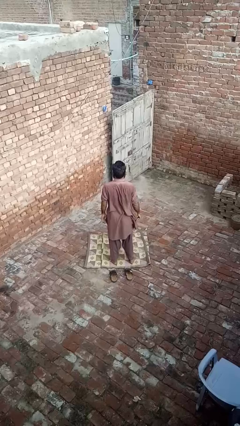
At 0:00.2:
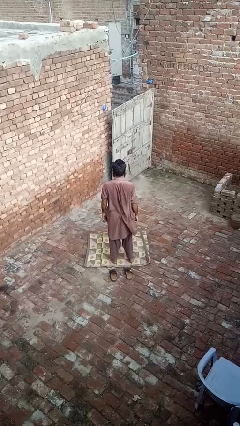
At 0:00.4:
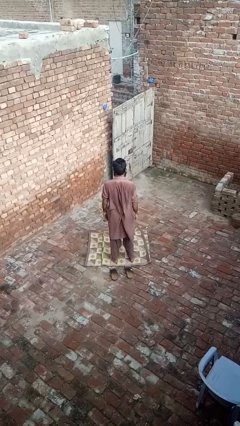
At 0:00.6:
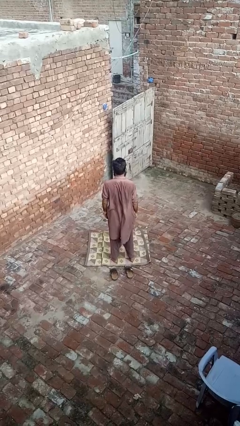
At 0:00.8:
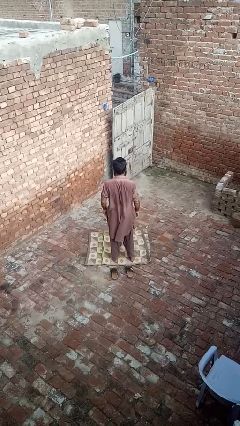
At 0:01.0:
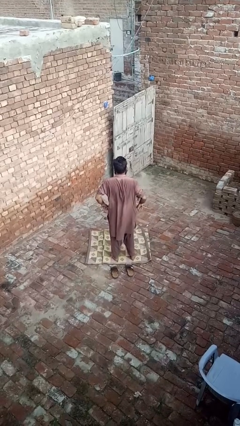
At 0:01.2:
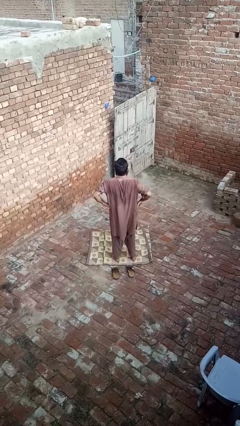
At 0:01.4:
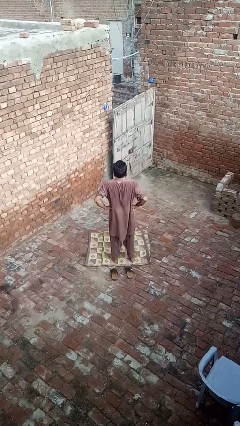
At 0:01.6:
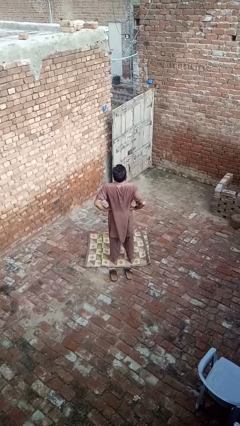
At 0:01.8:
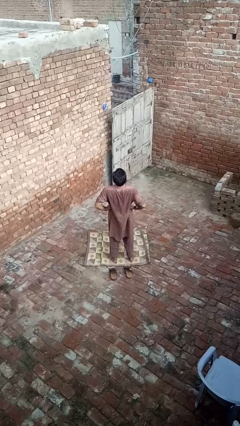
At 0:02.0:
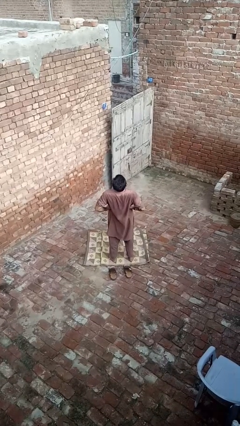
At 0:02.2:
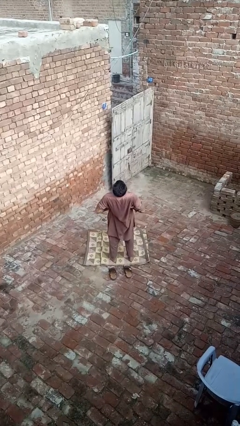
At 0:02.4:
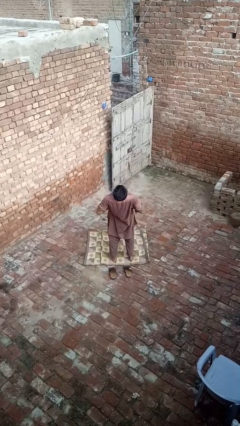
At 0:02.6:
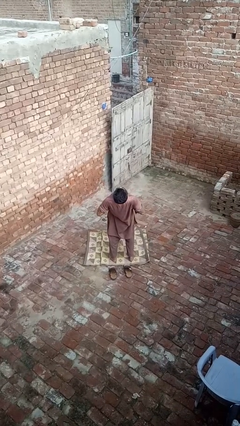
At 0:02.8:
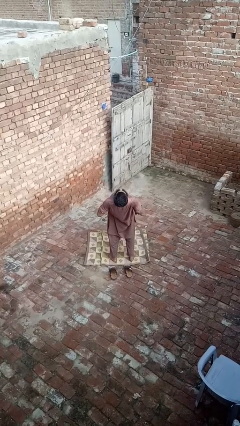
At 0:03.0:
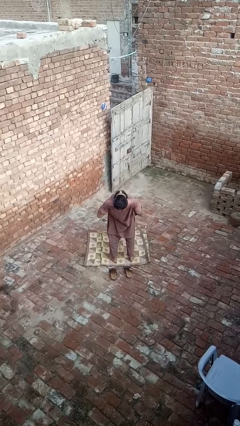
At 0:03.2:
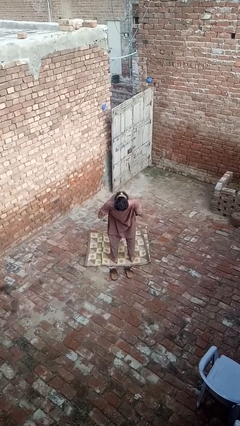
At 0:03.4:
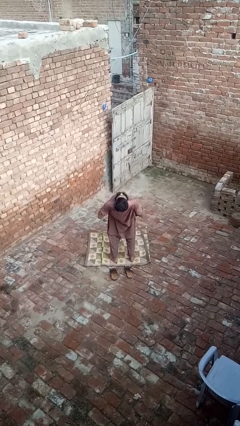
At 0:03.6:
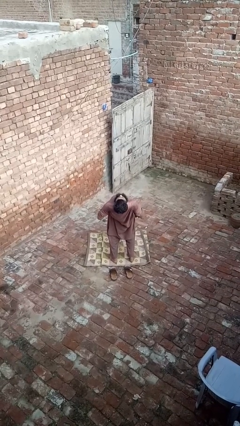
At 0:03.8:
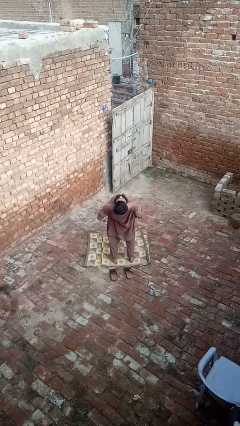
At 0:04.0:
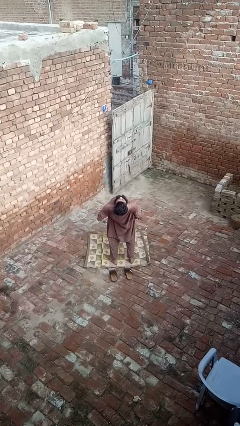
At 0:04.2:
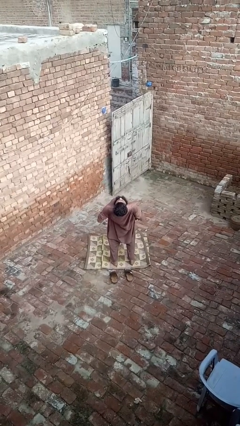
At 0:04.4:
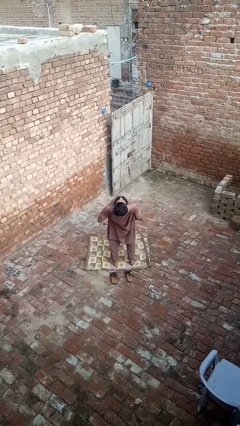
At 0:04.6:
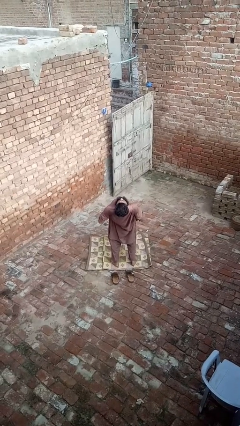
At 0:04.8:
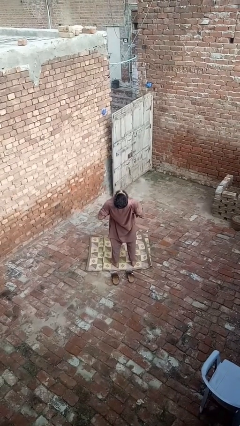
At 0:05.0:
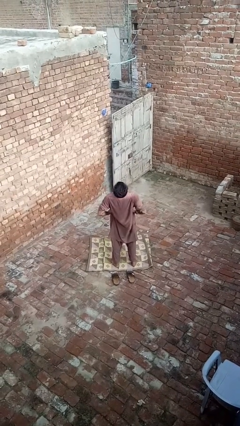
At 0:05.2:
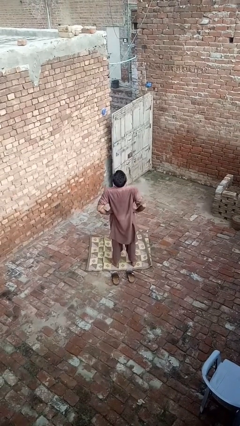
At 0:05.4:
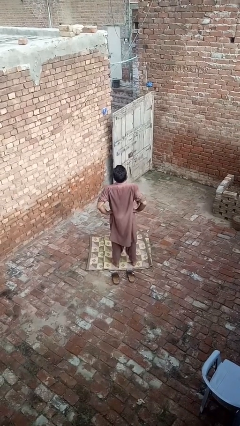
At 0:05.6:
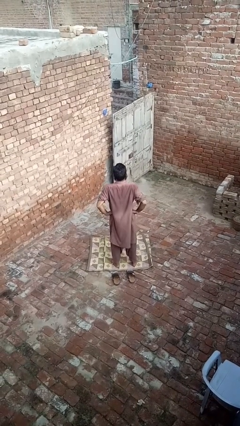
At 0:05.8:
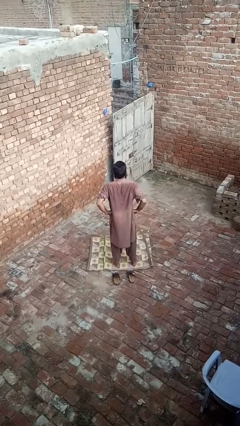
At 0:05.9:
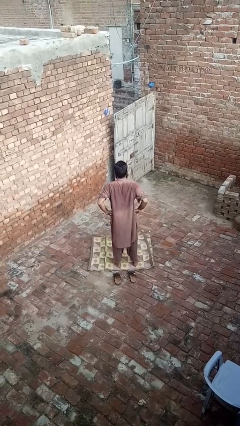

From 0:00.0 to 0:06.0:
person stretches back

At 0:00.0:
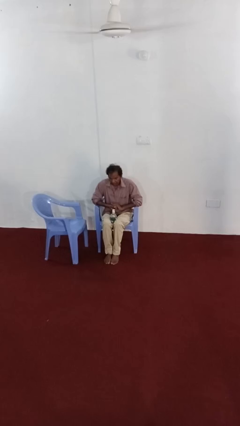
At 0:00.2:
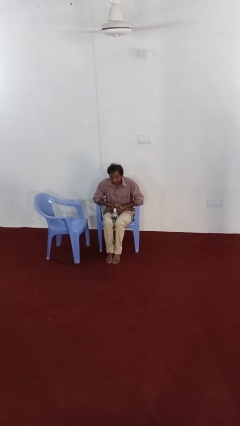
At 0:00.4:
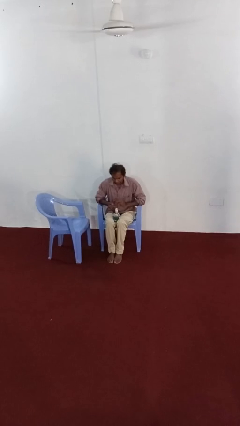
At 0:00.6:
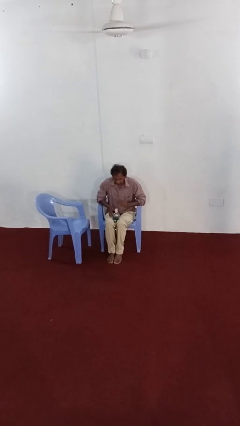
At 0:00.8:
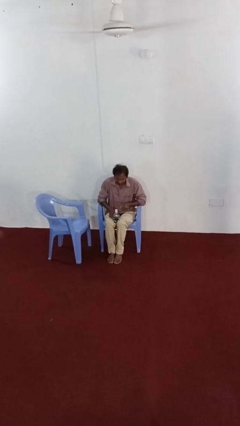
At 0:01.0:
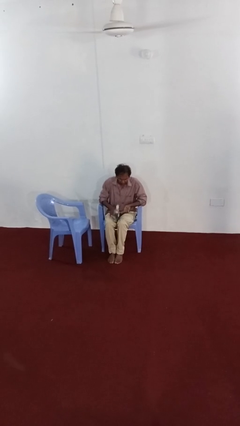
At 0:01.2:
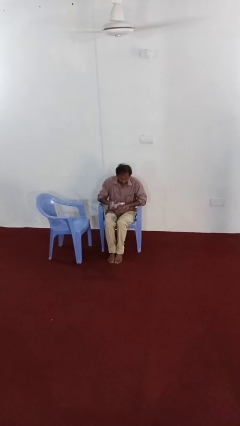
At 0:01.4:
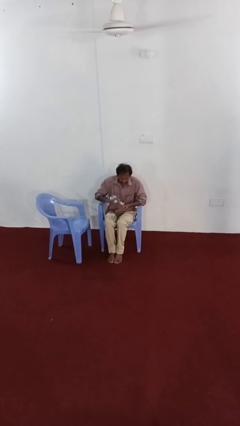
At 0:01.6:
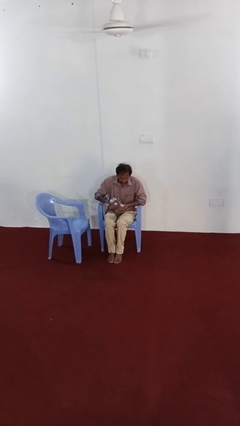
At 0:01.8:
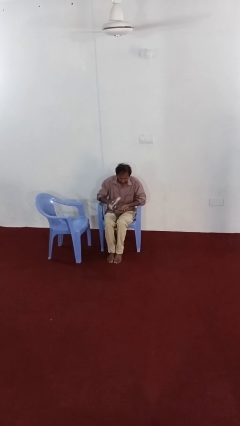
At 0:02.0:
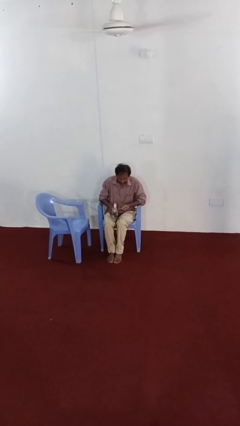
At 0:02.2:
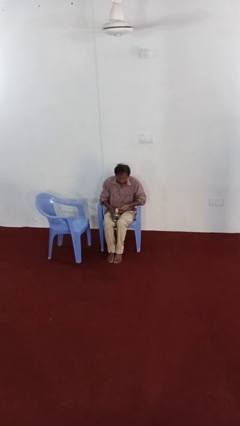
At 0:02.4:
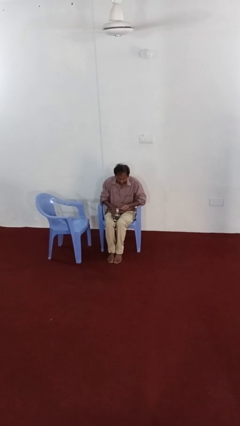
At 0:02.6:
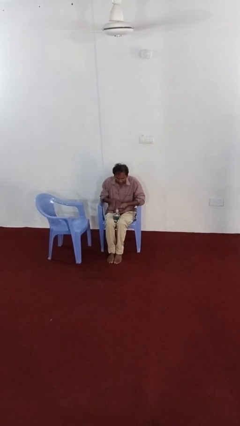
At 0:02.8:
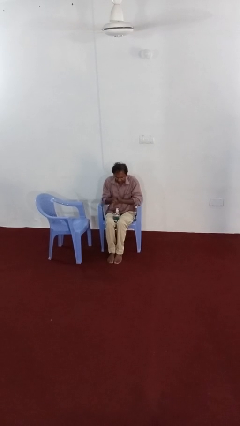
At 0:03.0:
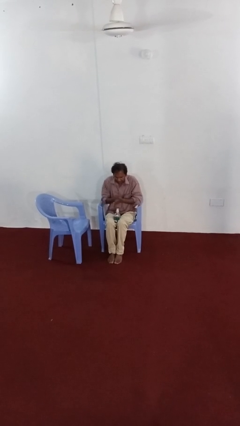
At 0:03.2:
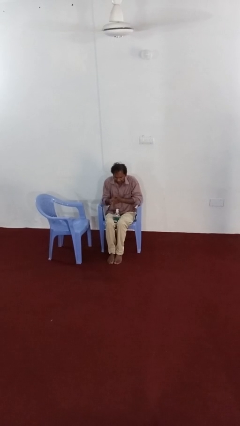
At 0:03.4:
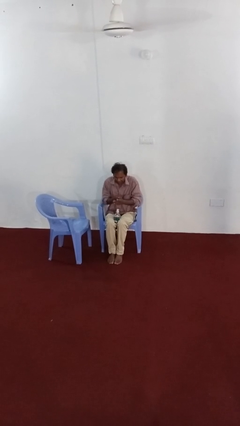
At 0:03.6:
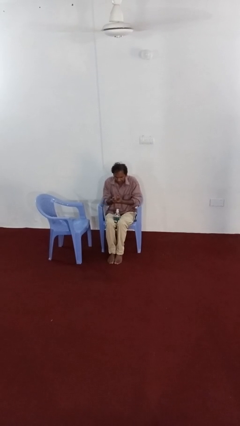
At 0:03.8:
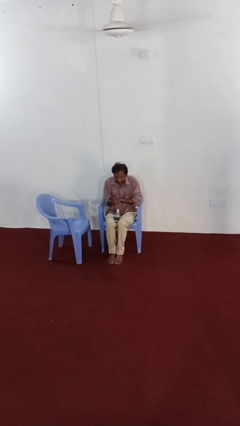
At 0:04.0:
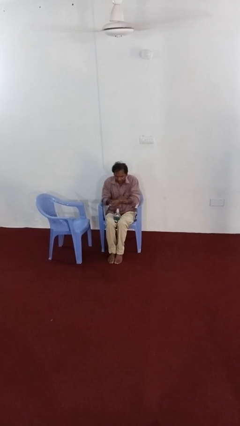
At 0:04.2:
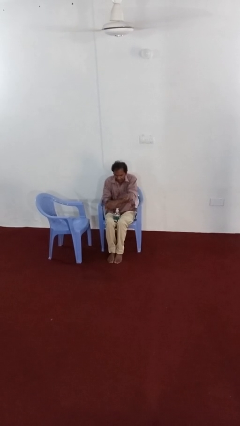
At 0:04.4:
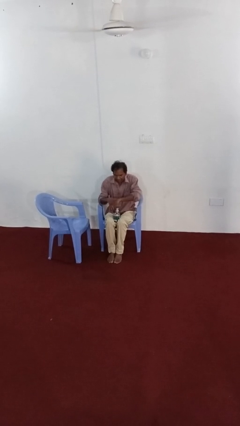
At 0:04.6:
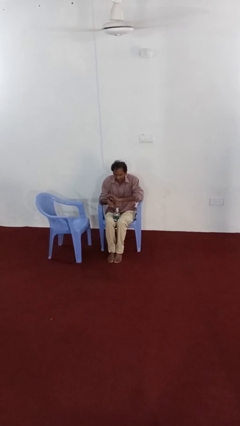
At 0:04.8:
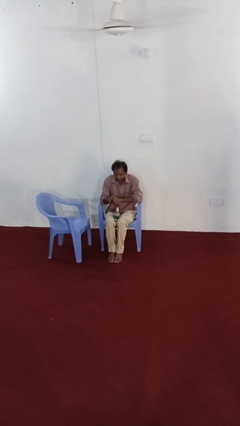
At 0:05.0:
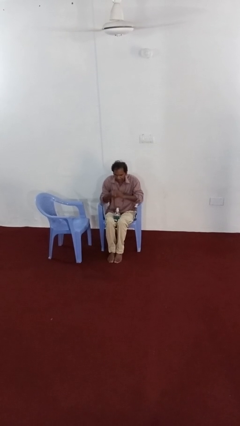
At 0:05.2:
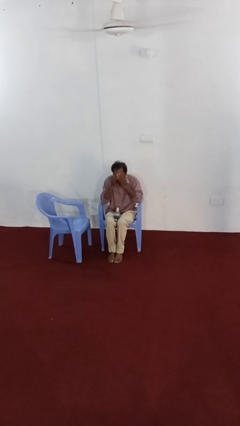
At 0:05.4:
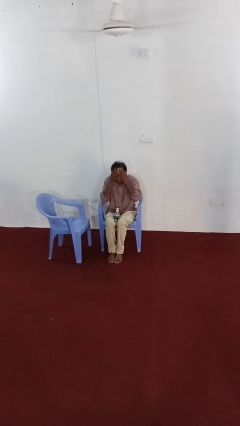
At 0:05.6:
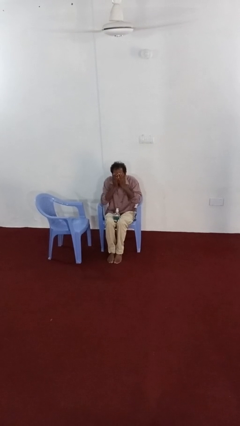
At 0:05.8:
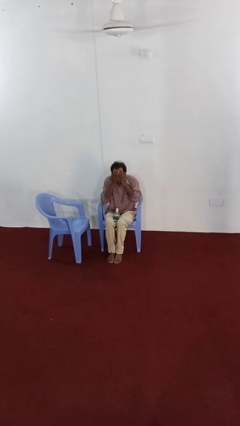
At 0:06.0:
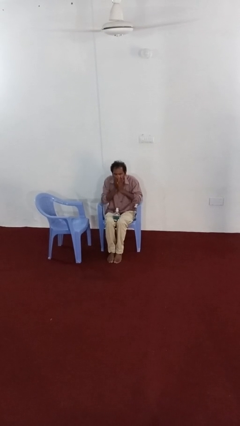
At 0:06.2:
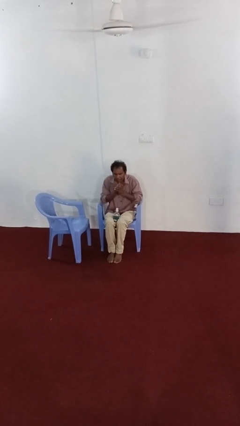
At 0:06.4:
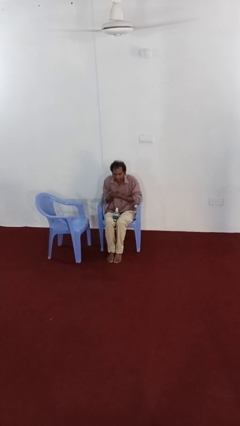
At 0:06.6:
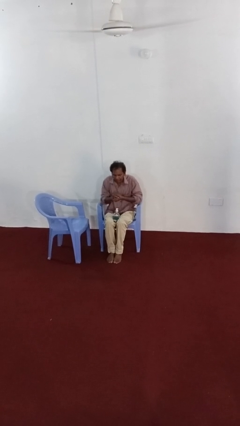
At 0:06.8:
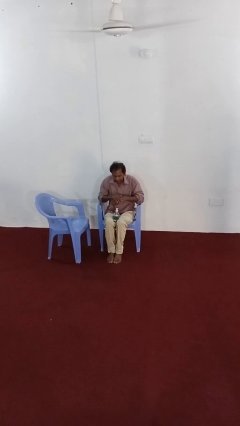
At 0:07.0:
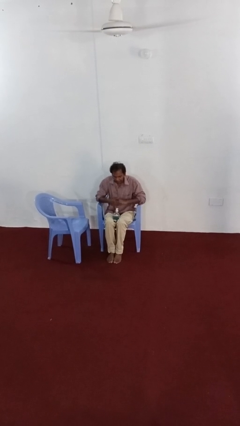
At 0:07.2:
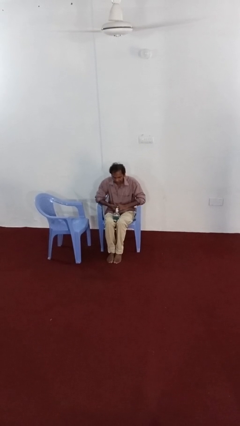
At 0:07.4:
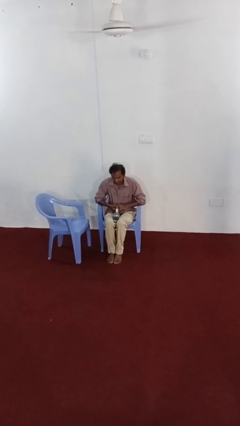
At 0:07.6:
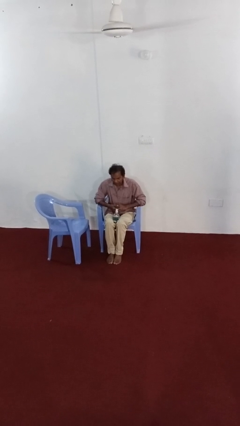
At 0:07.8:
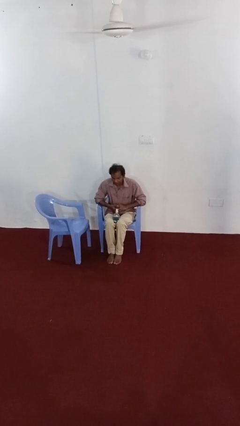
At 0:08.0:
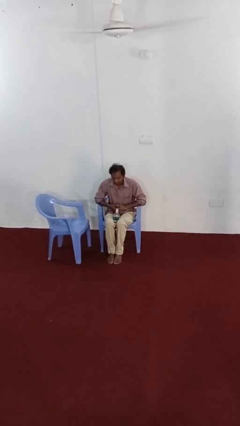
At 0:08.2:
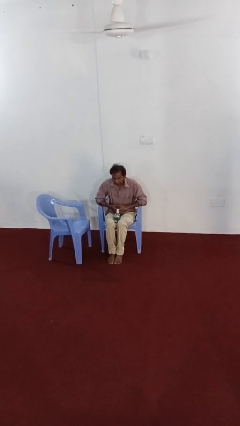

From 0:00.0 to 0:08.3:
person applies sunscreen

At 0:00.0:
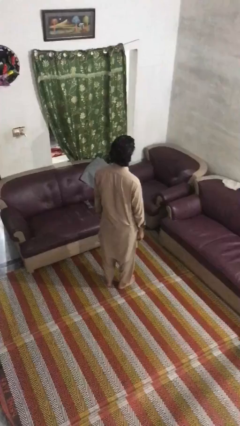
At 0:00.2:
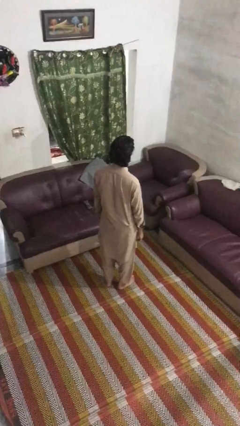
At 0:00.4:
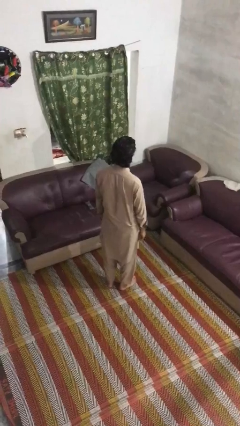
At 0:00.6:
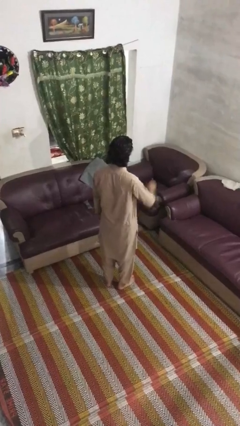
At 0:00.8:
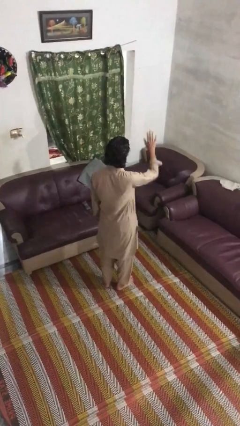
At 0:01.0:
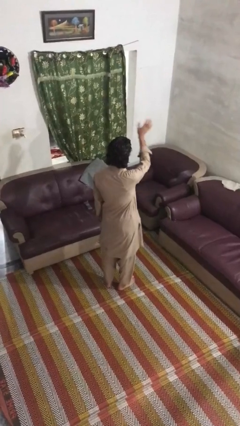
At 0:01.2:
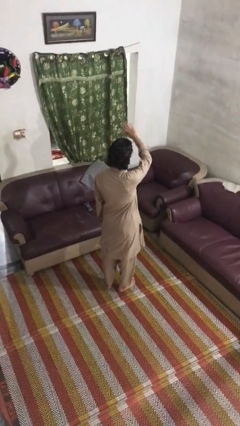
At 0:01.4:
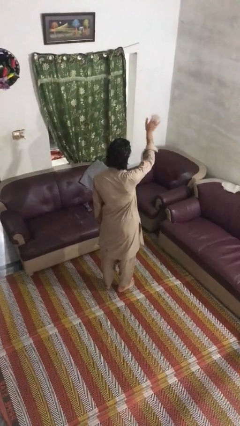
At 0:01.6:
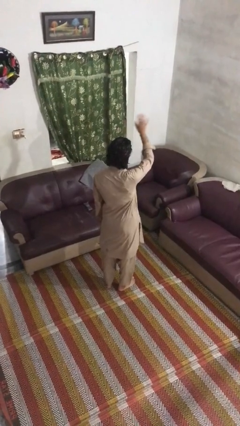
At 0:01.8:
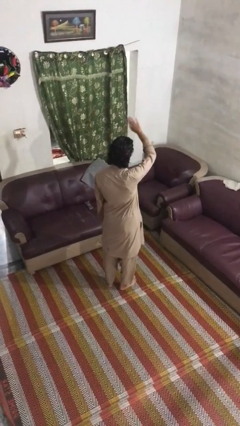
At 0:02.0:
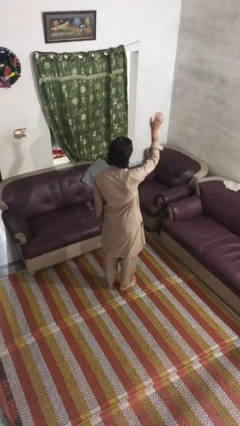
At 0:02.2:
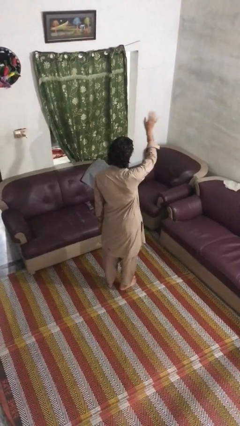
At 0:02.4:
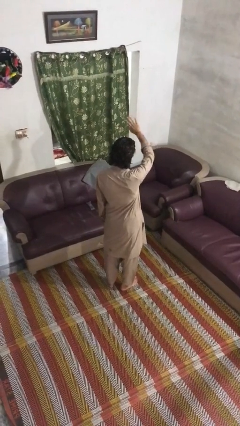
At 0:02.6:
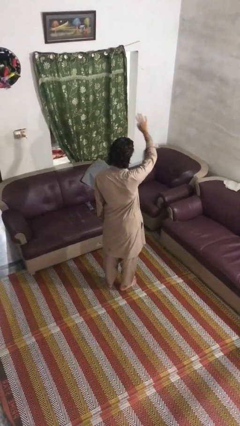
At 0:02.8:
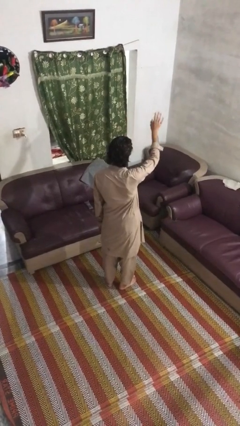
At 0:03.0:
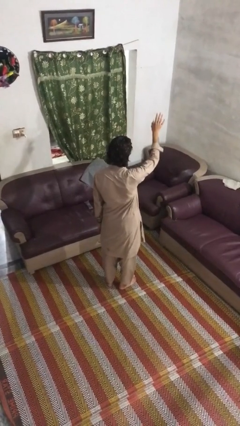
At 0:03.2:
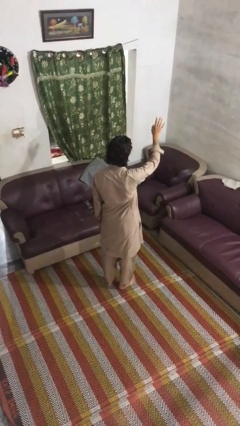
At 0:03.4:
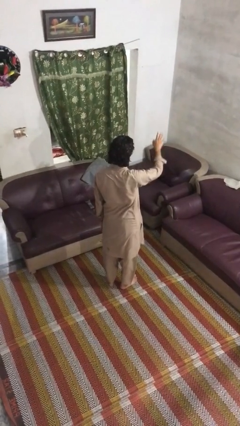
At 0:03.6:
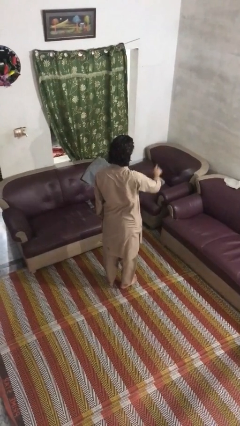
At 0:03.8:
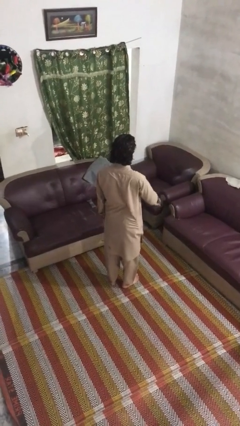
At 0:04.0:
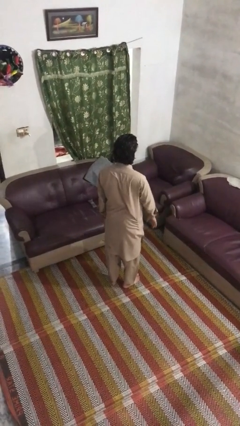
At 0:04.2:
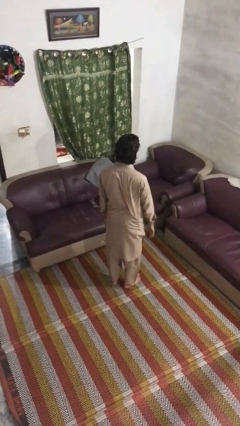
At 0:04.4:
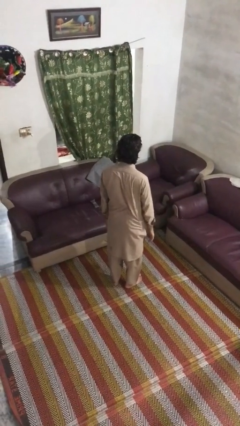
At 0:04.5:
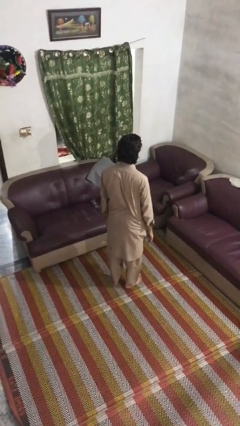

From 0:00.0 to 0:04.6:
person waves at person
